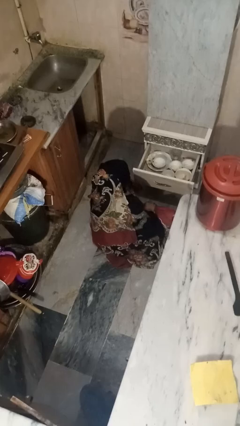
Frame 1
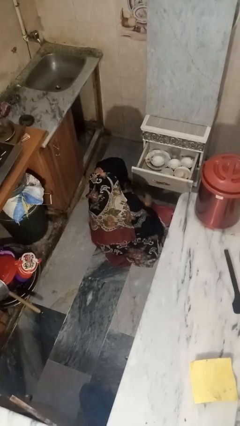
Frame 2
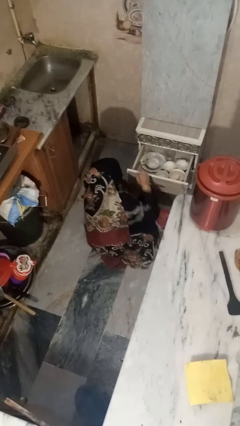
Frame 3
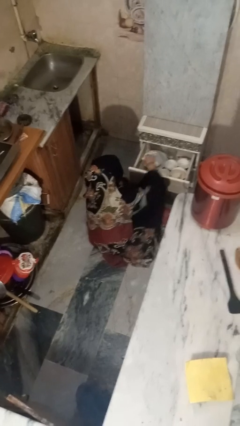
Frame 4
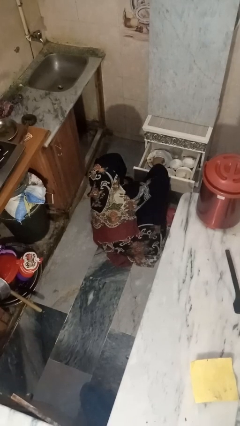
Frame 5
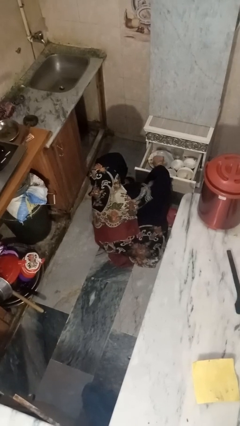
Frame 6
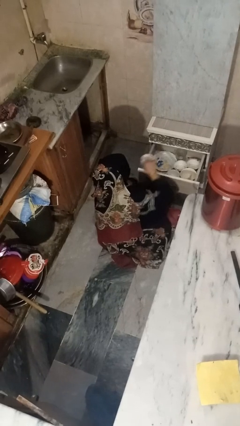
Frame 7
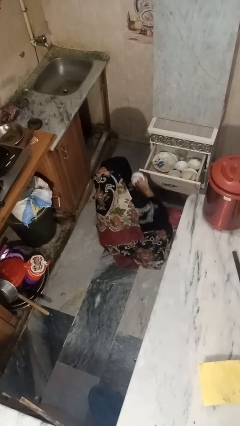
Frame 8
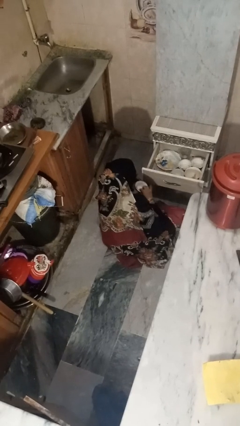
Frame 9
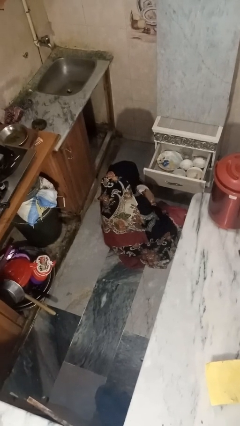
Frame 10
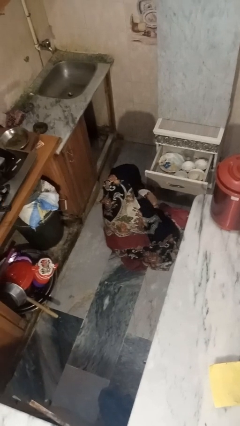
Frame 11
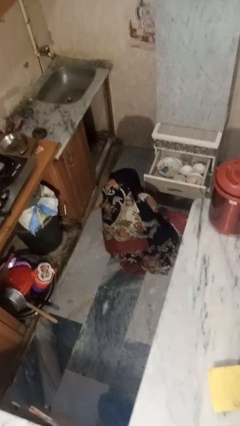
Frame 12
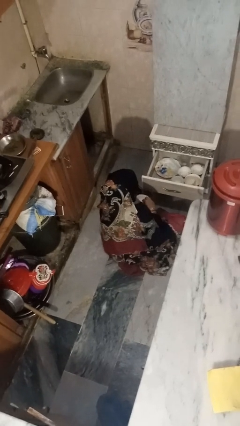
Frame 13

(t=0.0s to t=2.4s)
person takes object from kitchen drawer

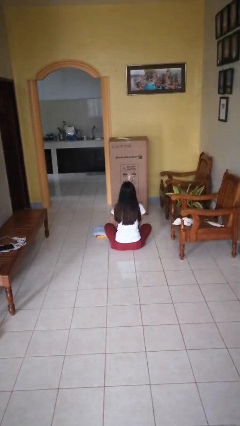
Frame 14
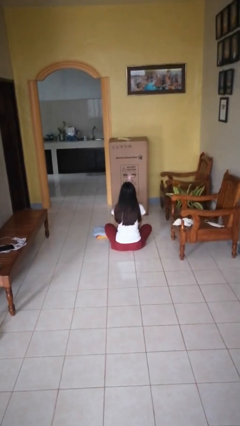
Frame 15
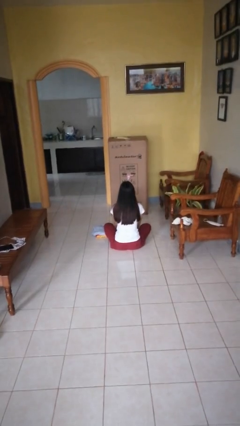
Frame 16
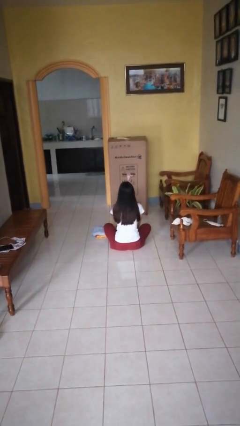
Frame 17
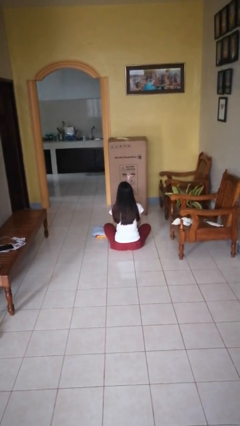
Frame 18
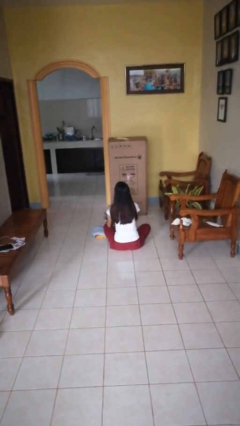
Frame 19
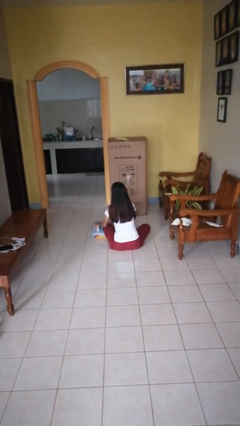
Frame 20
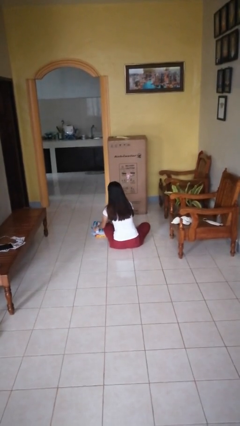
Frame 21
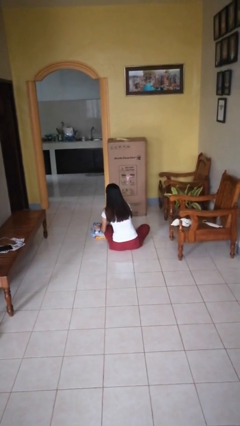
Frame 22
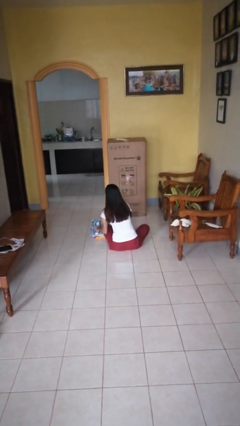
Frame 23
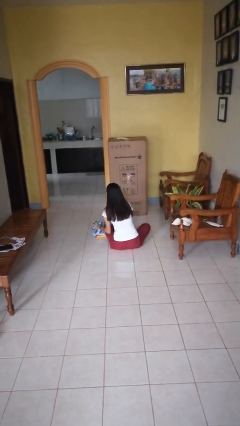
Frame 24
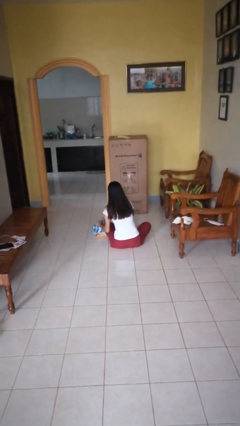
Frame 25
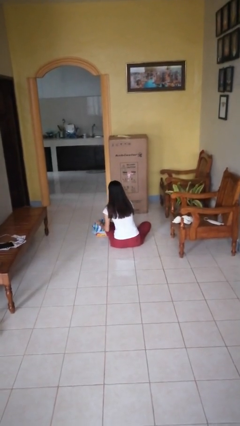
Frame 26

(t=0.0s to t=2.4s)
person folds towel

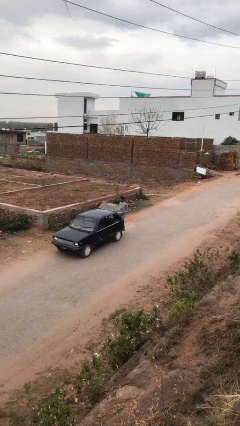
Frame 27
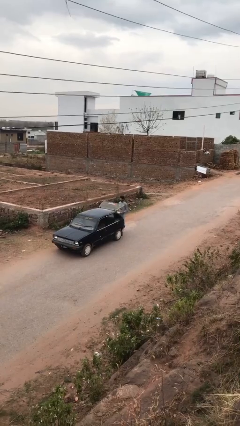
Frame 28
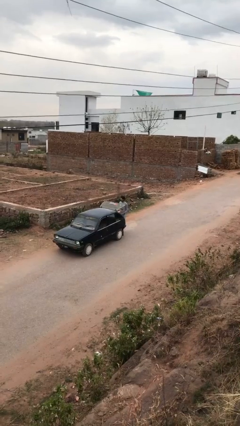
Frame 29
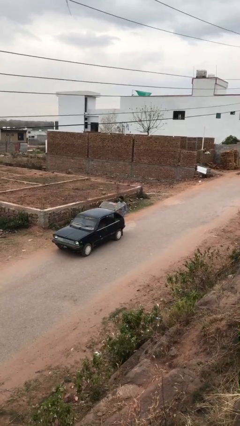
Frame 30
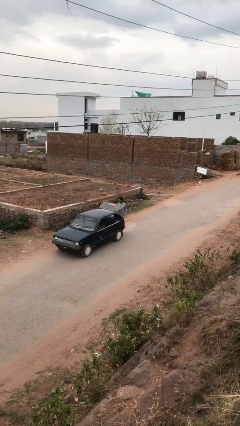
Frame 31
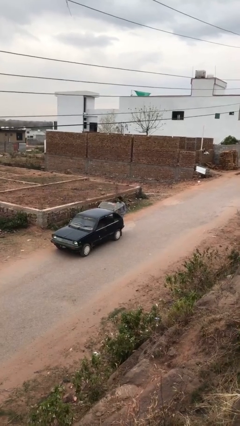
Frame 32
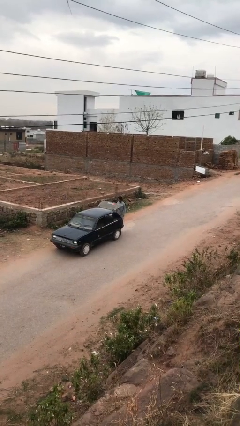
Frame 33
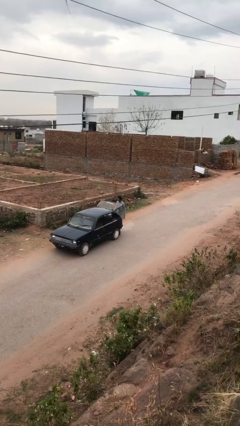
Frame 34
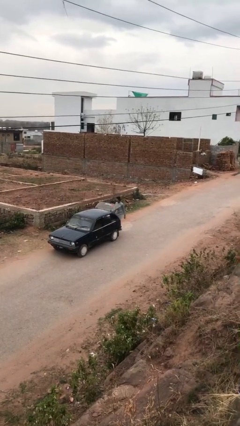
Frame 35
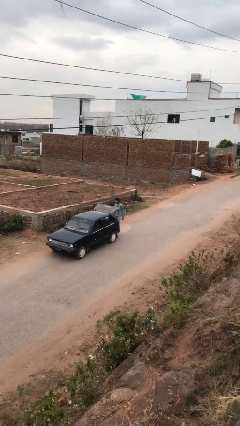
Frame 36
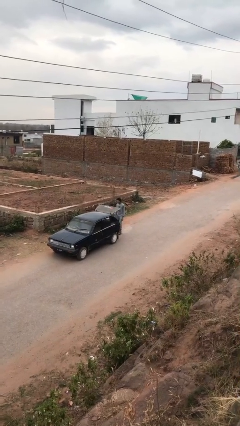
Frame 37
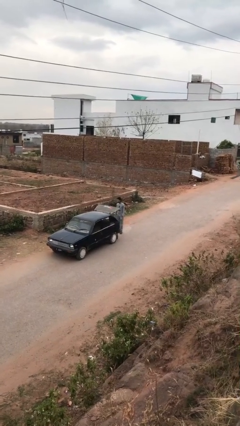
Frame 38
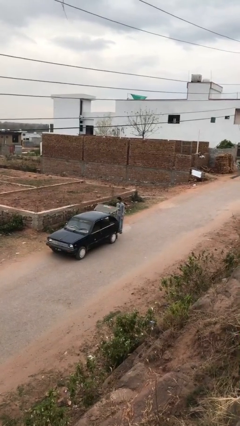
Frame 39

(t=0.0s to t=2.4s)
person loads car

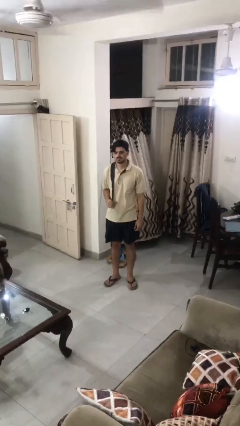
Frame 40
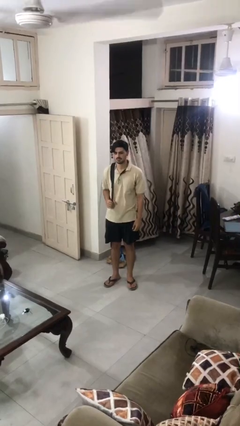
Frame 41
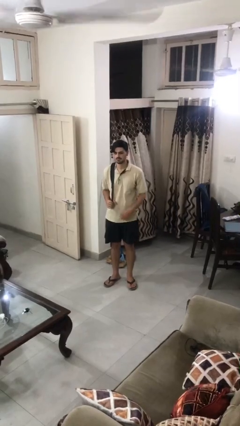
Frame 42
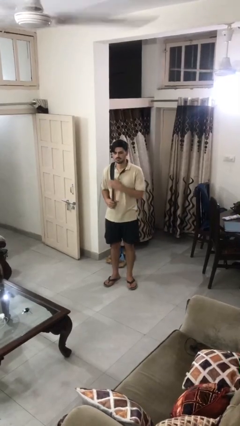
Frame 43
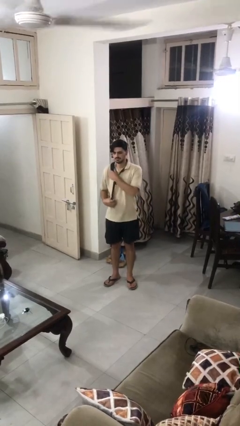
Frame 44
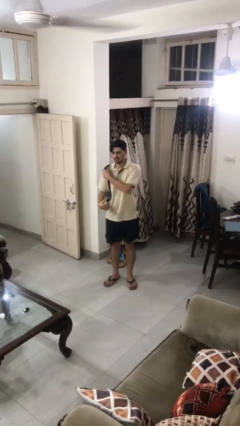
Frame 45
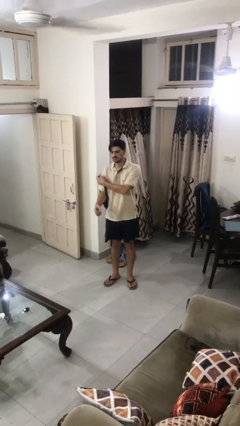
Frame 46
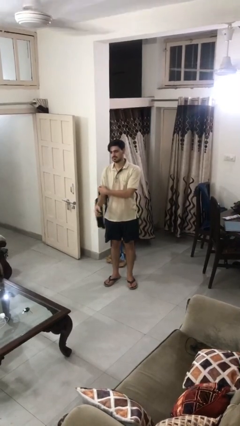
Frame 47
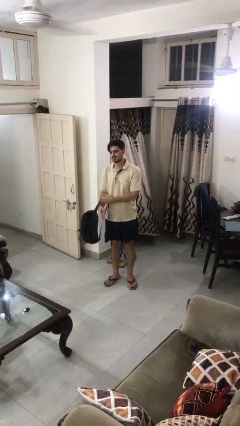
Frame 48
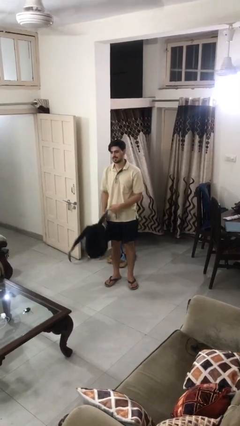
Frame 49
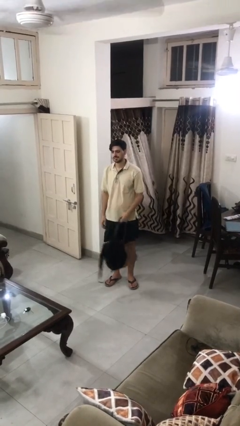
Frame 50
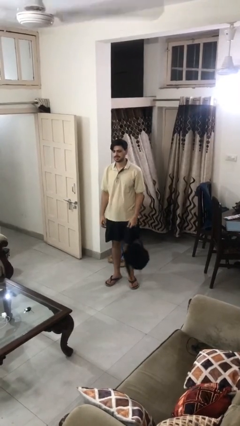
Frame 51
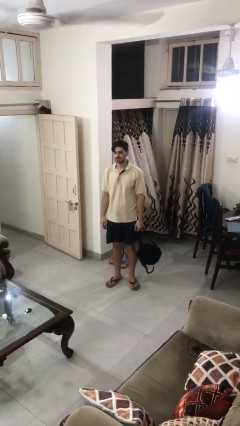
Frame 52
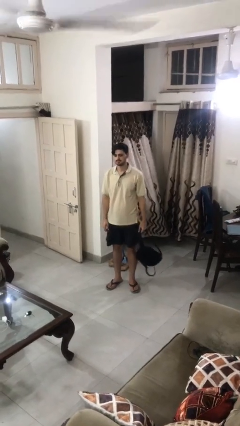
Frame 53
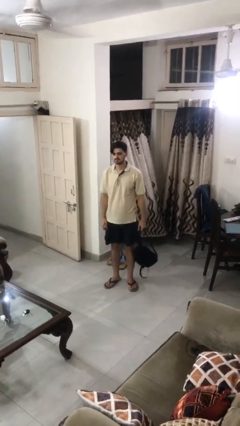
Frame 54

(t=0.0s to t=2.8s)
person takes off backpack

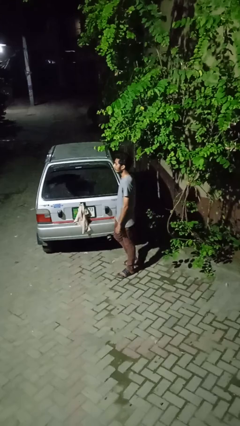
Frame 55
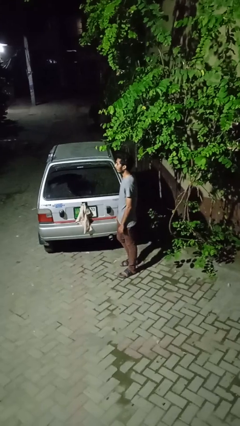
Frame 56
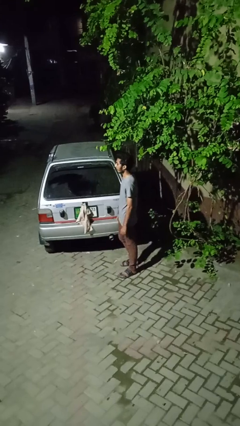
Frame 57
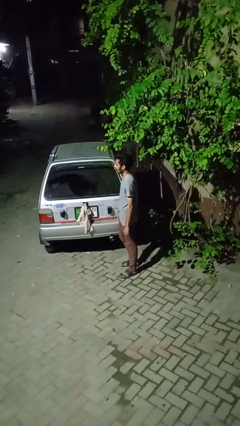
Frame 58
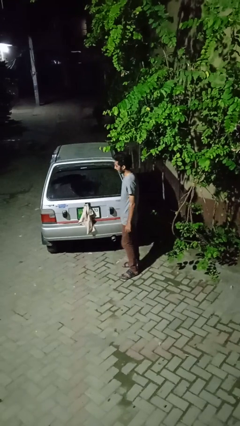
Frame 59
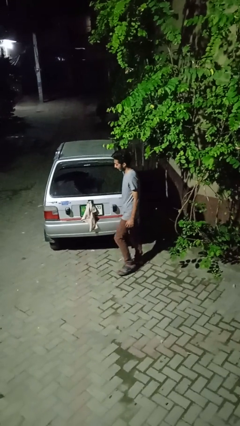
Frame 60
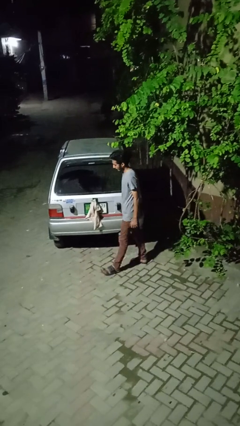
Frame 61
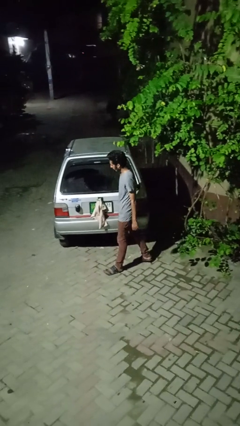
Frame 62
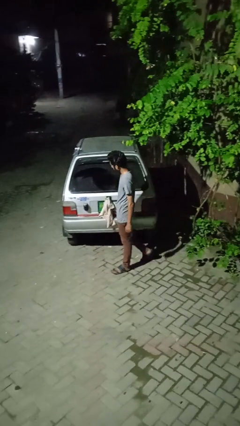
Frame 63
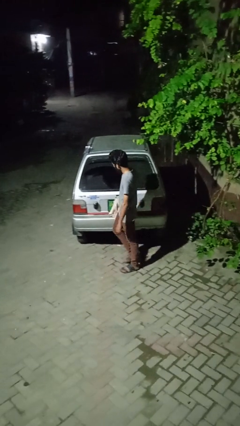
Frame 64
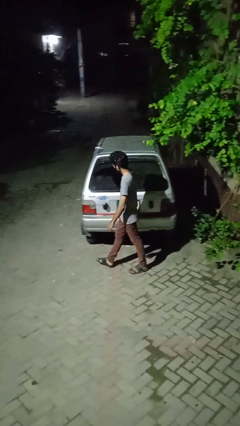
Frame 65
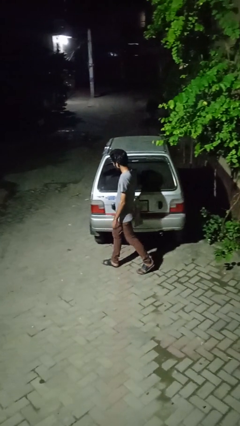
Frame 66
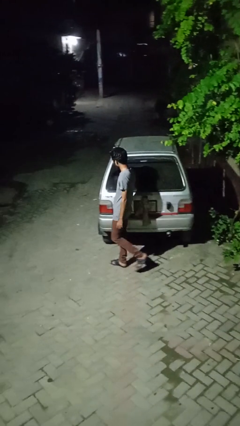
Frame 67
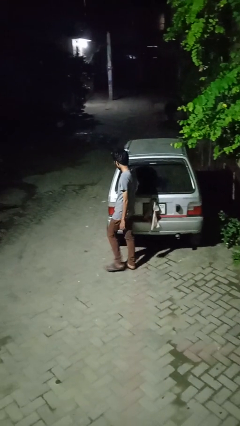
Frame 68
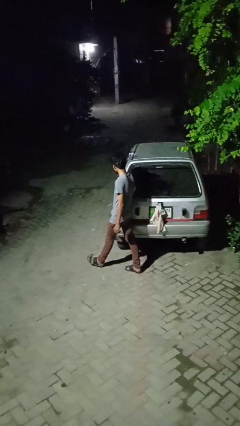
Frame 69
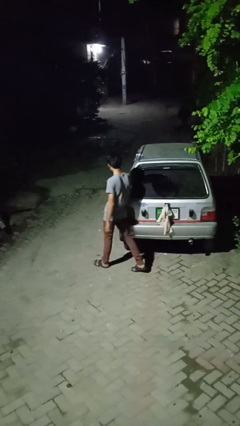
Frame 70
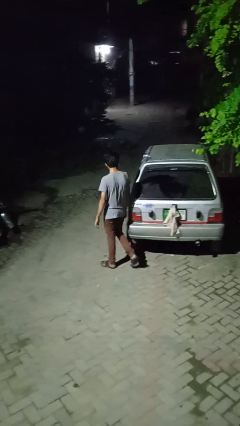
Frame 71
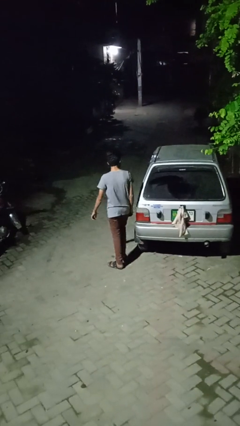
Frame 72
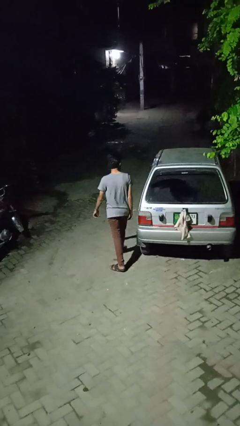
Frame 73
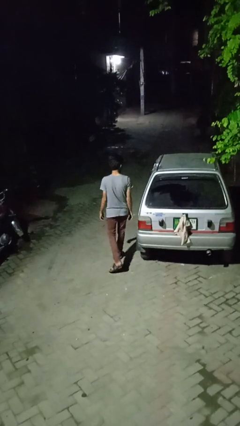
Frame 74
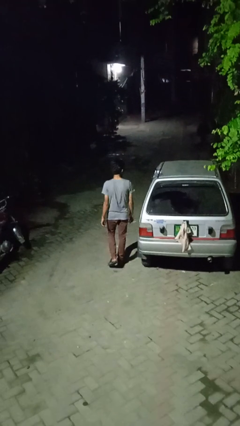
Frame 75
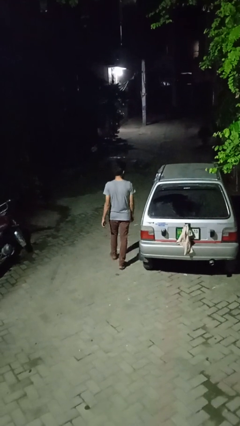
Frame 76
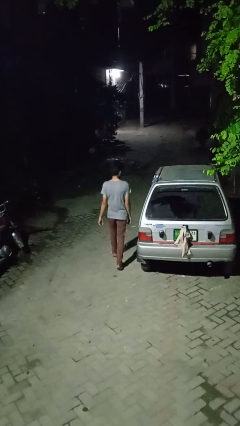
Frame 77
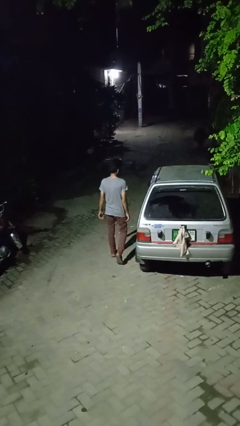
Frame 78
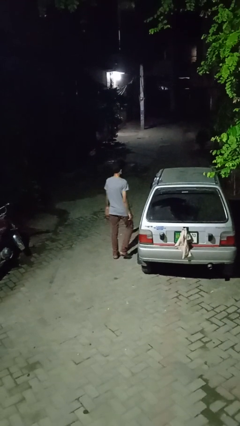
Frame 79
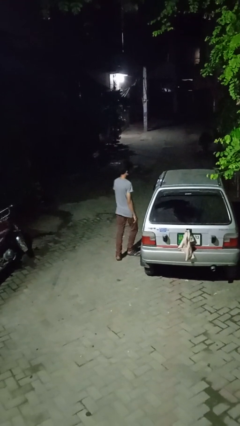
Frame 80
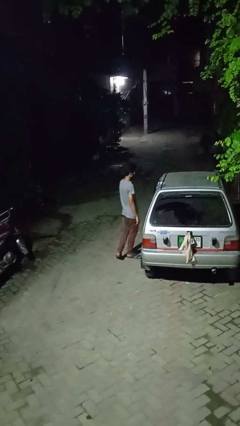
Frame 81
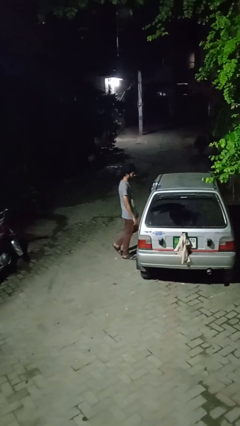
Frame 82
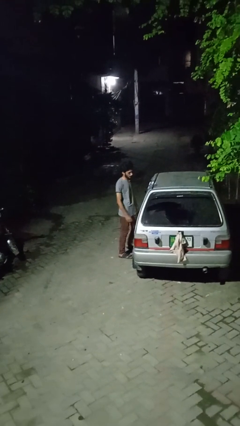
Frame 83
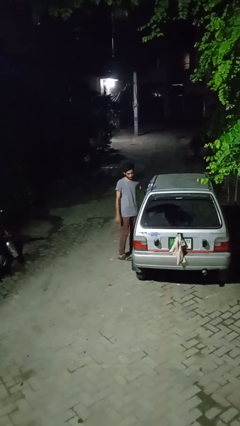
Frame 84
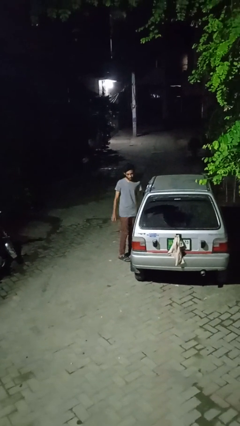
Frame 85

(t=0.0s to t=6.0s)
person walks around car

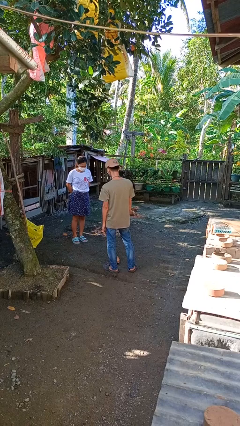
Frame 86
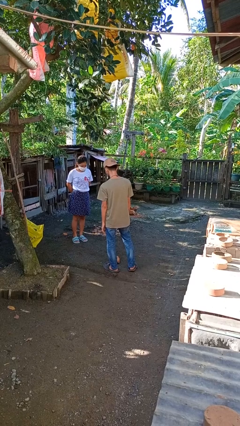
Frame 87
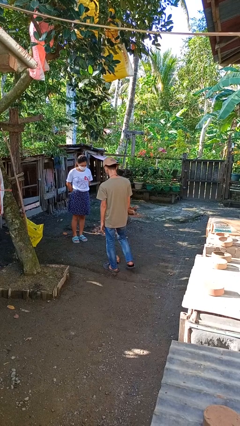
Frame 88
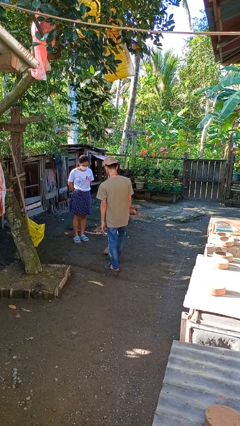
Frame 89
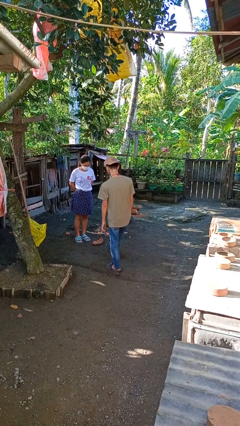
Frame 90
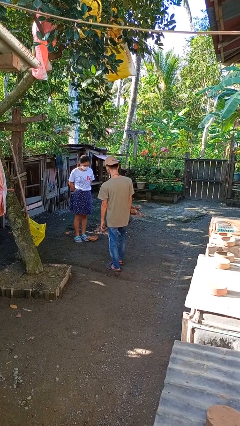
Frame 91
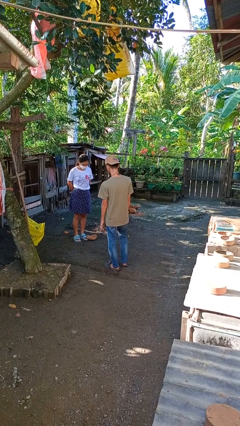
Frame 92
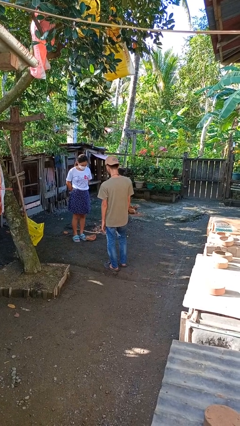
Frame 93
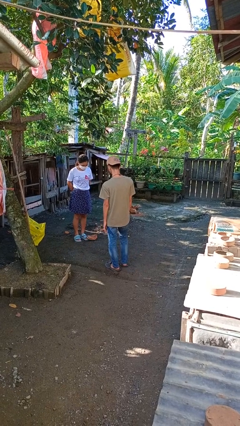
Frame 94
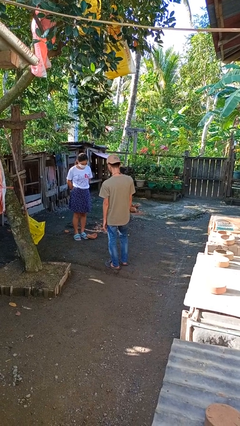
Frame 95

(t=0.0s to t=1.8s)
person kicks object to person
